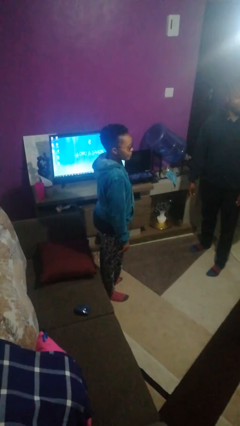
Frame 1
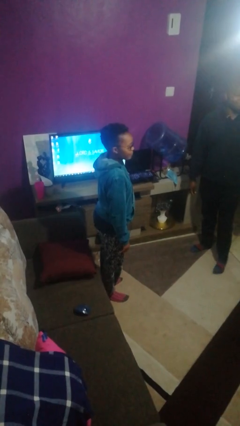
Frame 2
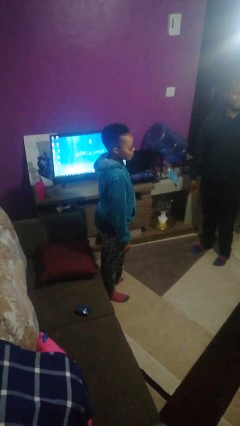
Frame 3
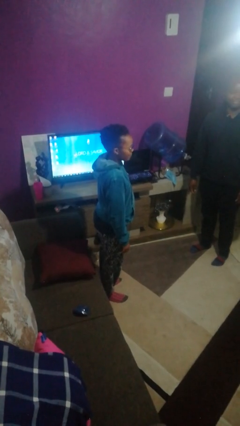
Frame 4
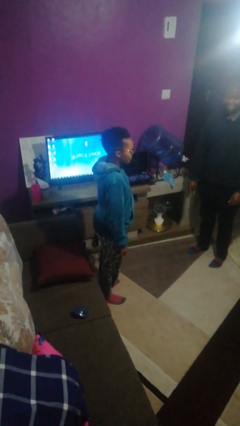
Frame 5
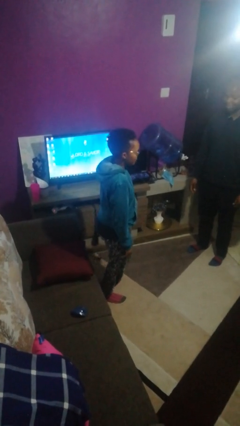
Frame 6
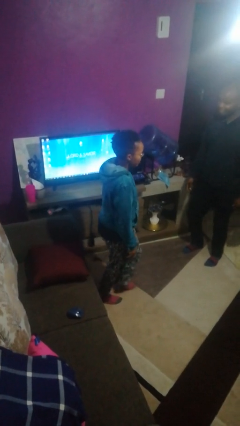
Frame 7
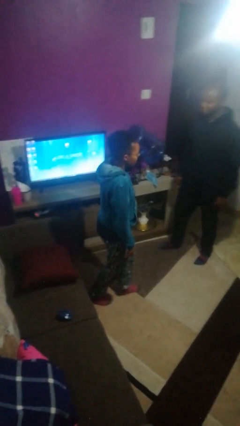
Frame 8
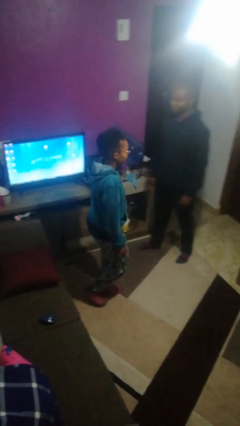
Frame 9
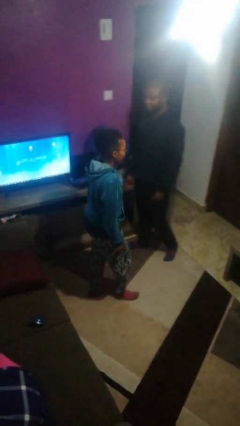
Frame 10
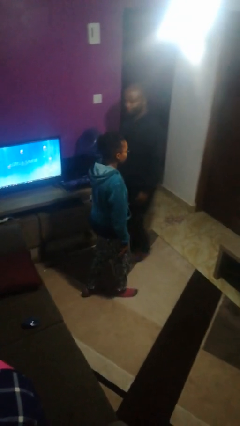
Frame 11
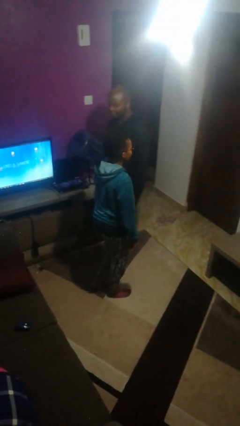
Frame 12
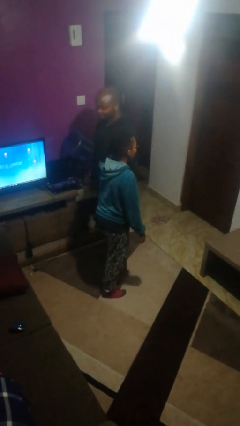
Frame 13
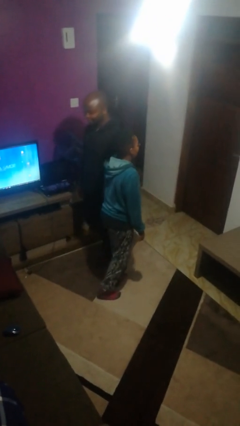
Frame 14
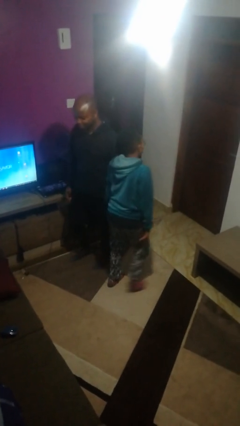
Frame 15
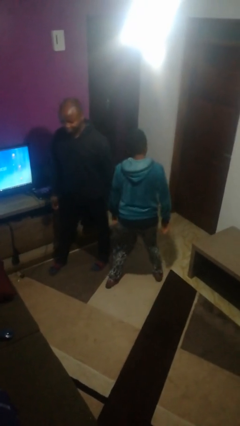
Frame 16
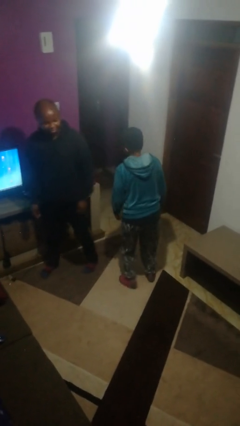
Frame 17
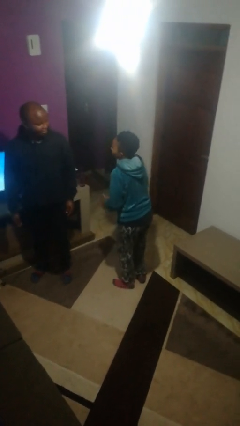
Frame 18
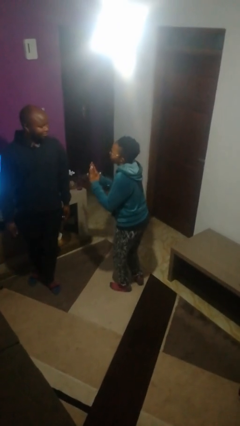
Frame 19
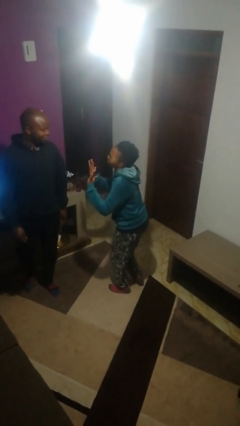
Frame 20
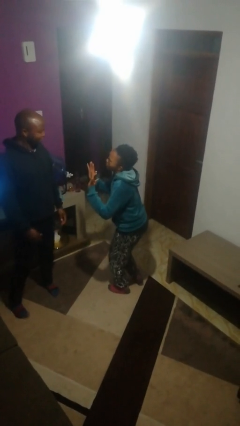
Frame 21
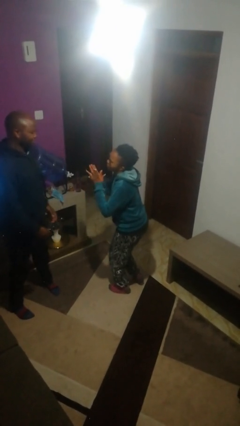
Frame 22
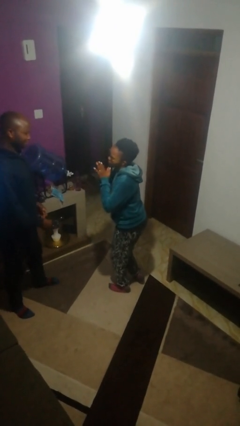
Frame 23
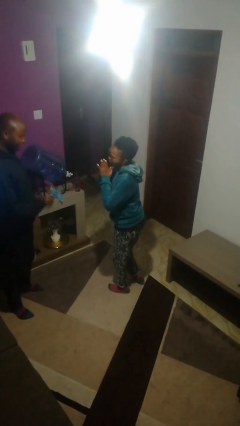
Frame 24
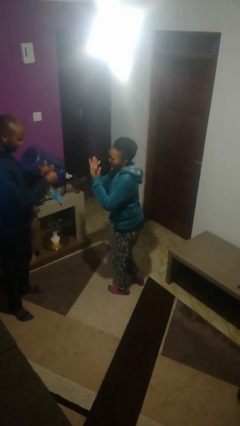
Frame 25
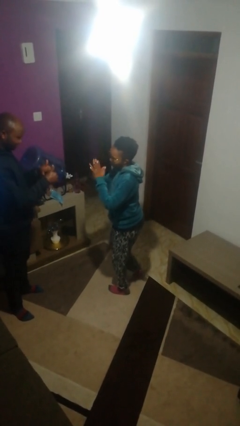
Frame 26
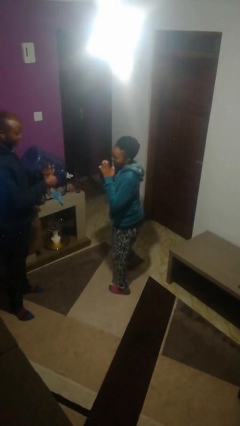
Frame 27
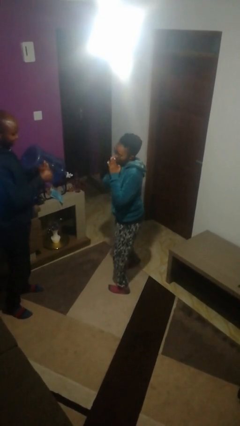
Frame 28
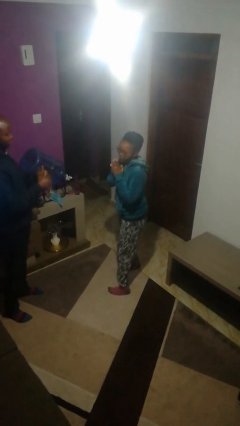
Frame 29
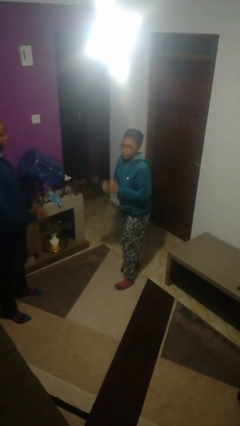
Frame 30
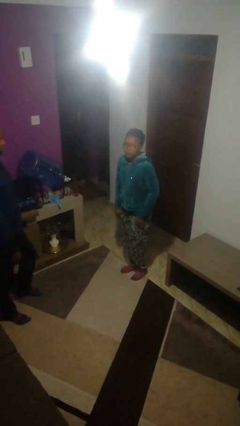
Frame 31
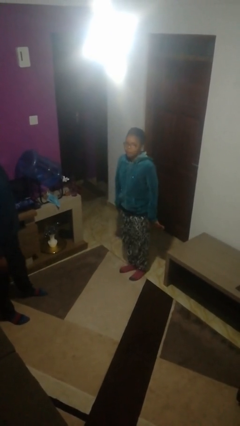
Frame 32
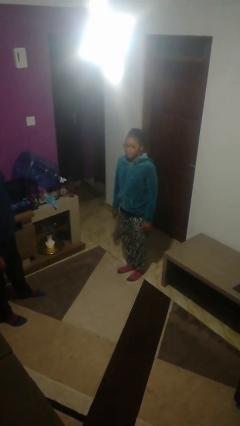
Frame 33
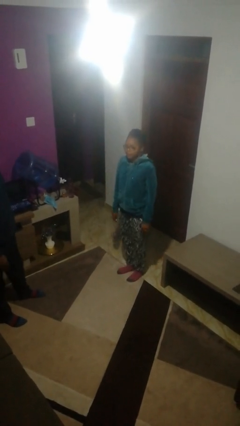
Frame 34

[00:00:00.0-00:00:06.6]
person bumps into person

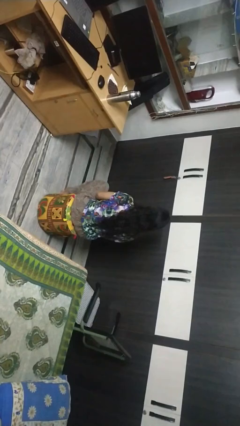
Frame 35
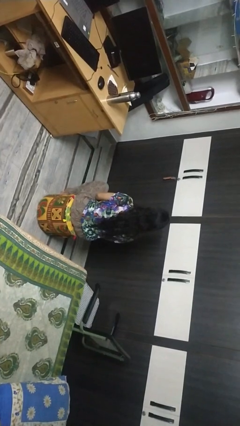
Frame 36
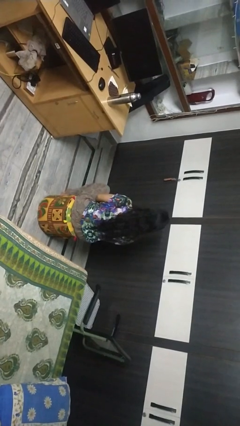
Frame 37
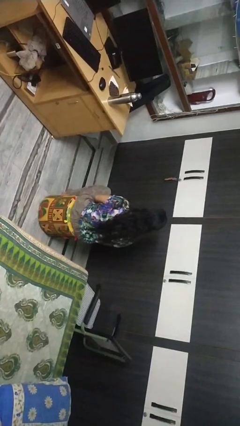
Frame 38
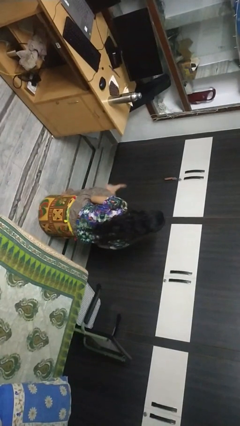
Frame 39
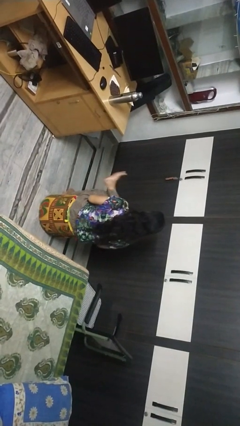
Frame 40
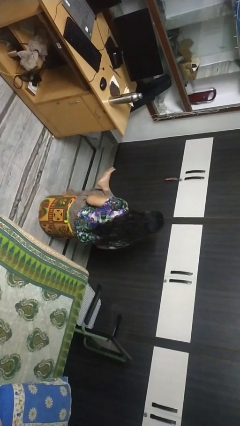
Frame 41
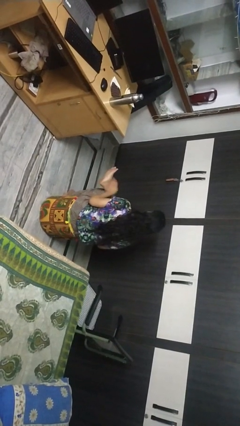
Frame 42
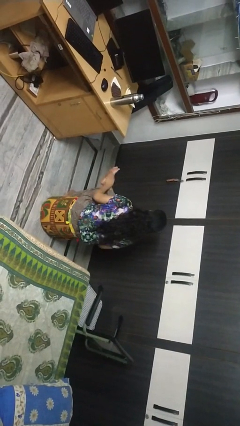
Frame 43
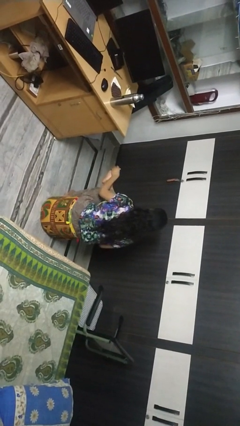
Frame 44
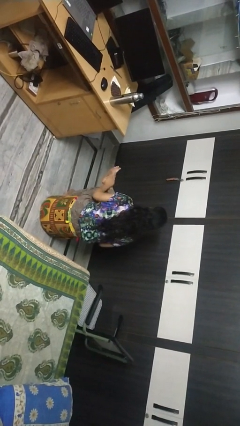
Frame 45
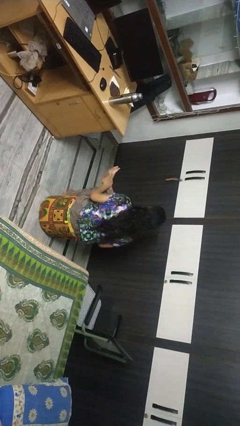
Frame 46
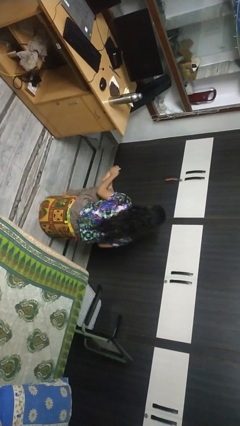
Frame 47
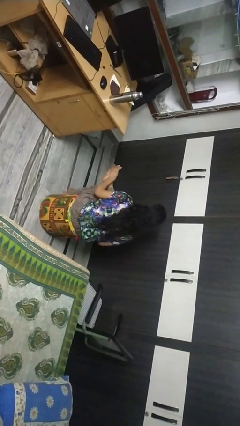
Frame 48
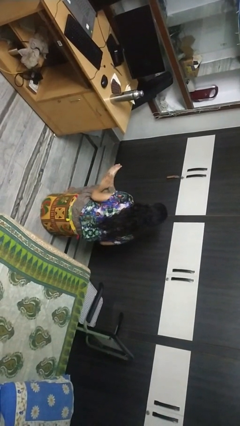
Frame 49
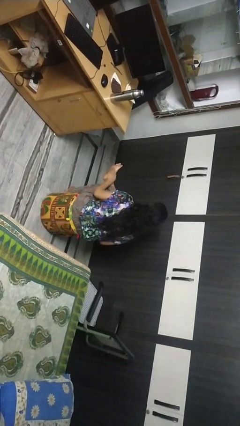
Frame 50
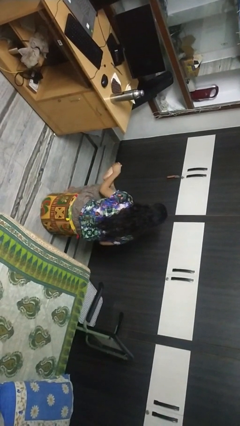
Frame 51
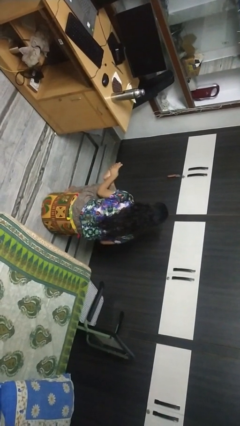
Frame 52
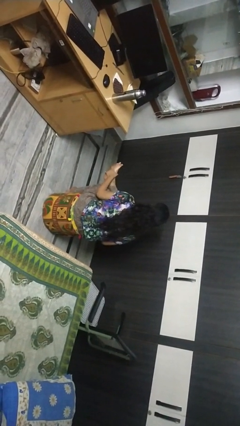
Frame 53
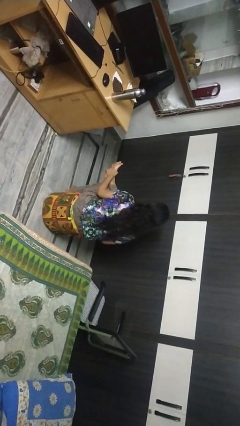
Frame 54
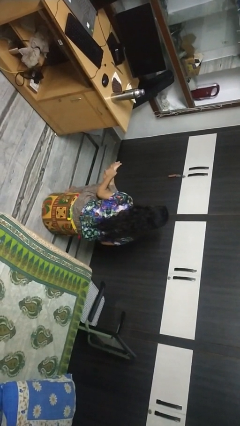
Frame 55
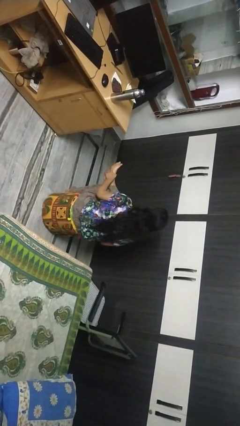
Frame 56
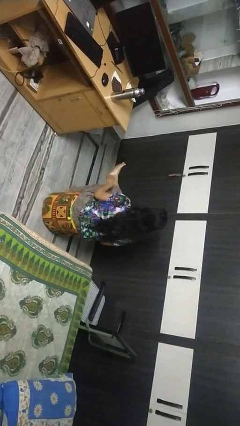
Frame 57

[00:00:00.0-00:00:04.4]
person rubs foot

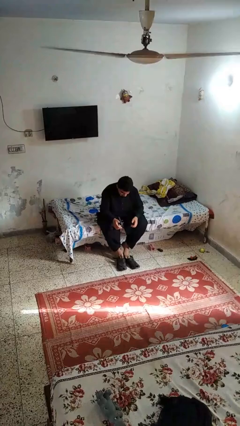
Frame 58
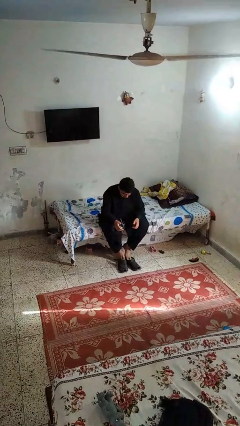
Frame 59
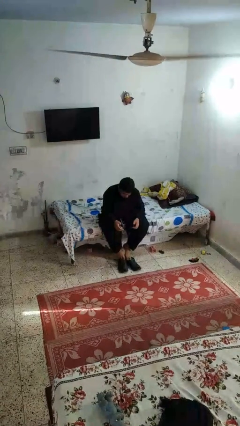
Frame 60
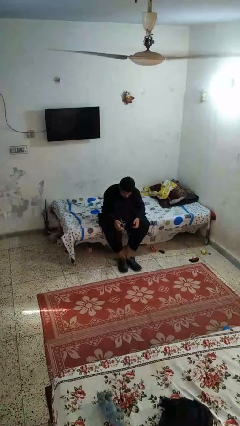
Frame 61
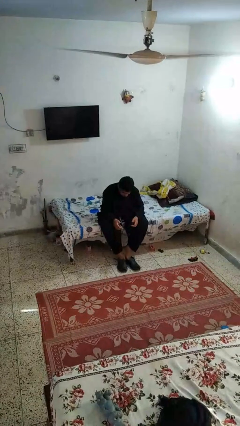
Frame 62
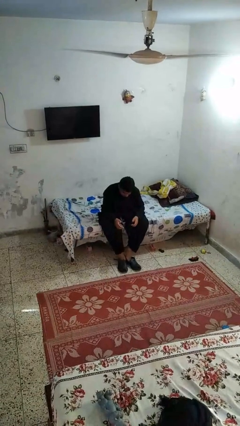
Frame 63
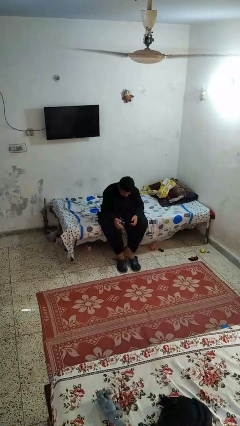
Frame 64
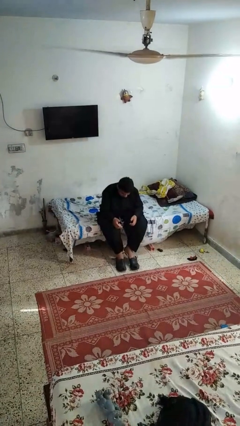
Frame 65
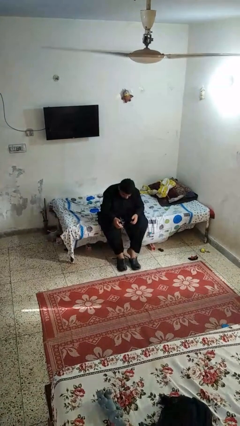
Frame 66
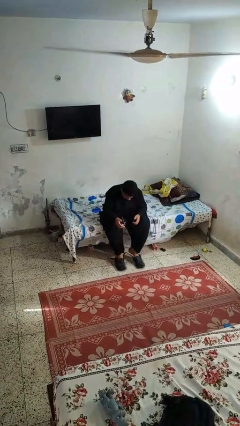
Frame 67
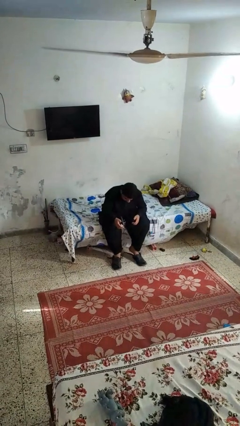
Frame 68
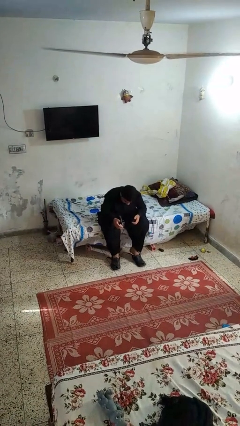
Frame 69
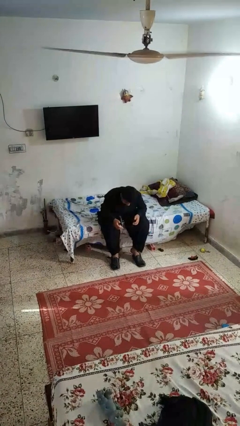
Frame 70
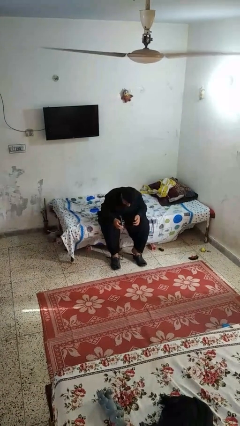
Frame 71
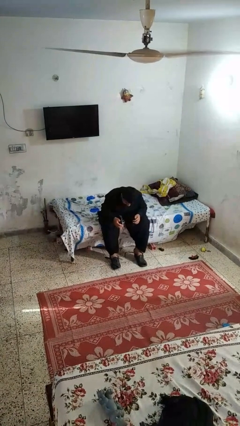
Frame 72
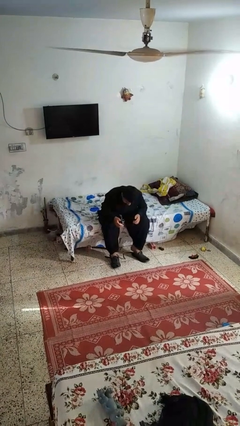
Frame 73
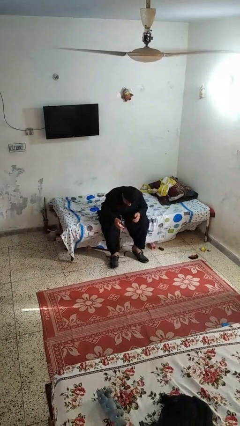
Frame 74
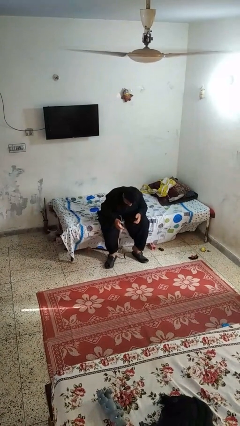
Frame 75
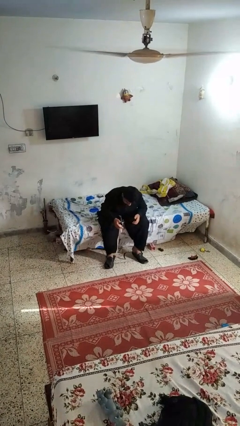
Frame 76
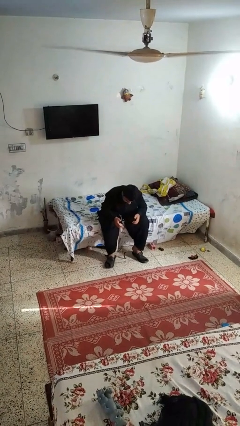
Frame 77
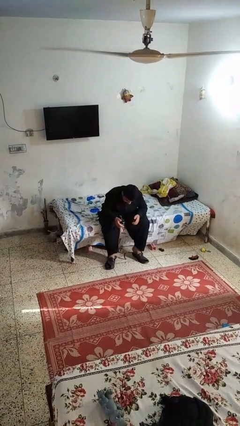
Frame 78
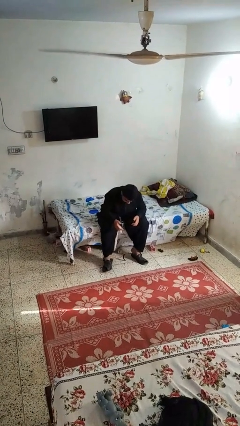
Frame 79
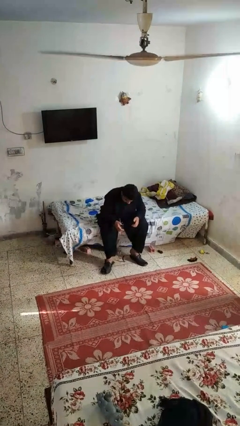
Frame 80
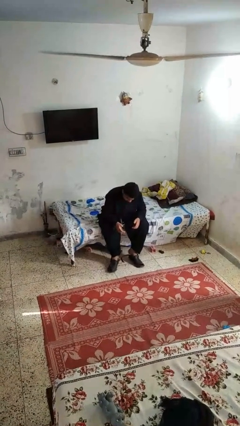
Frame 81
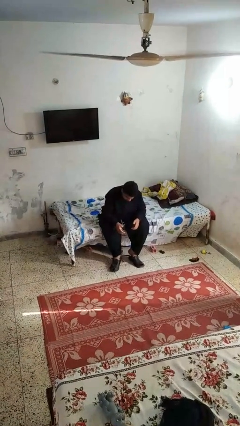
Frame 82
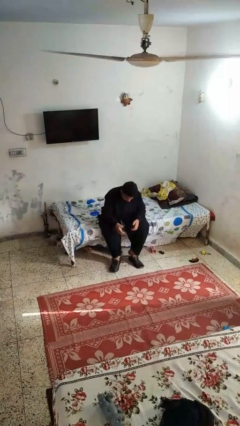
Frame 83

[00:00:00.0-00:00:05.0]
person puts on shoes

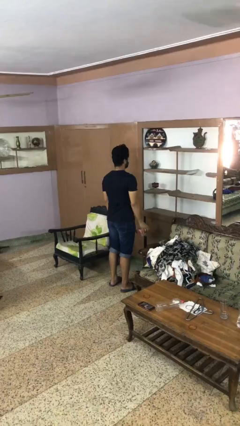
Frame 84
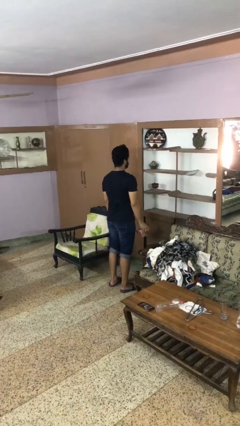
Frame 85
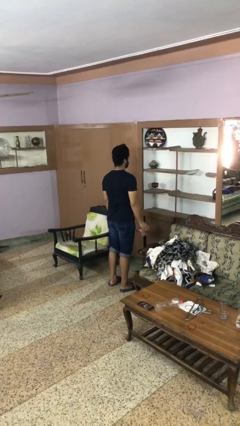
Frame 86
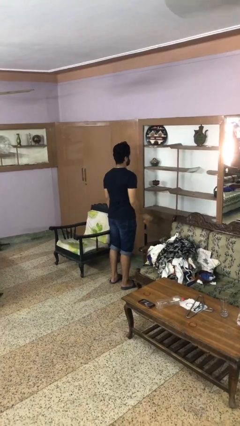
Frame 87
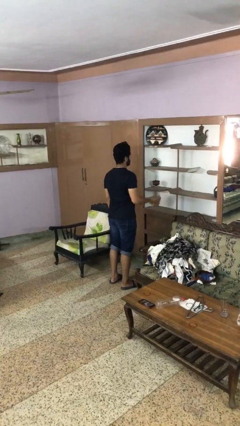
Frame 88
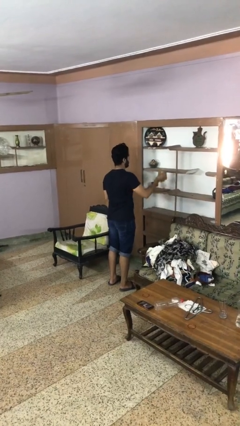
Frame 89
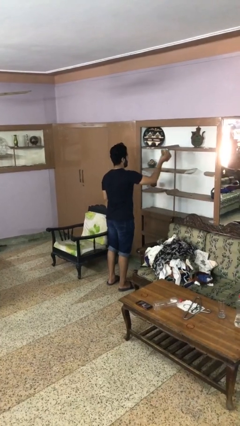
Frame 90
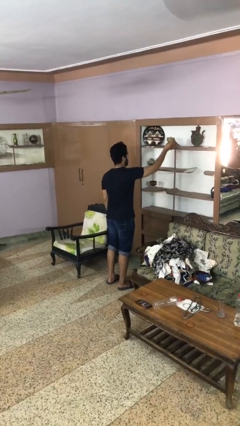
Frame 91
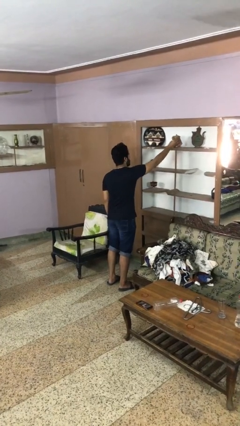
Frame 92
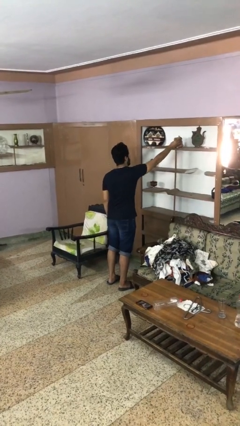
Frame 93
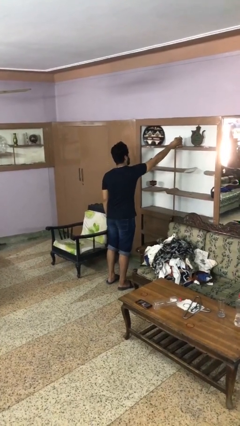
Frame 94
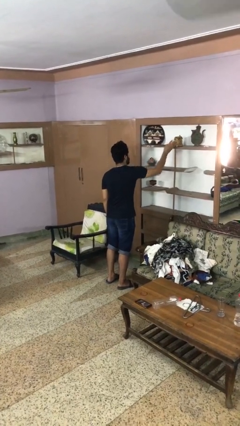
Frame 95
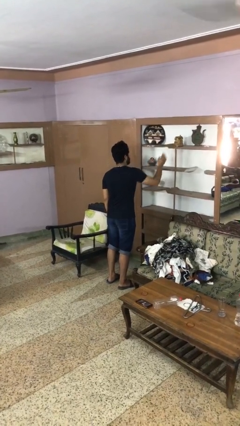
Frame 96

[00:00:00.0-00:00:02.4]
person puts down object on shelf
